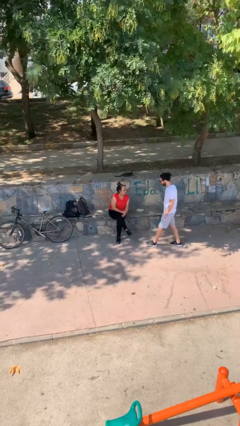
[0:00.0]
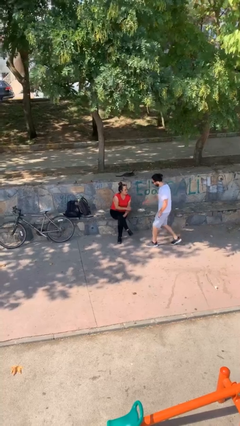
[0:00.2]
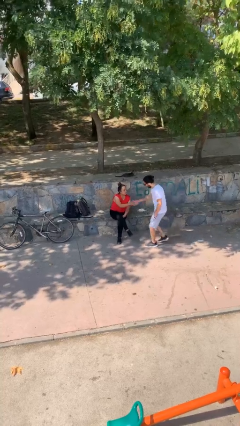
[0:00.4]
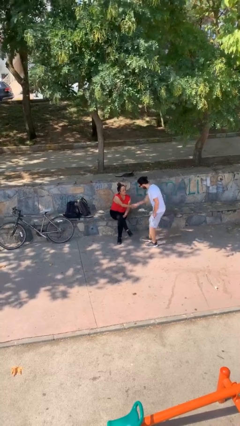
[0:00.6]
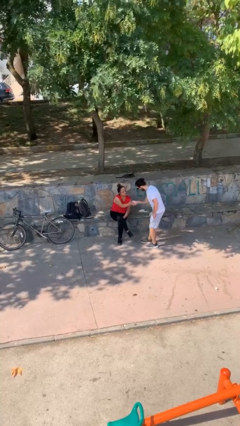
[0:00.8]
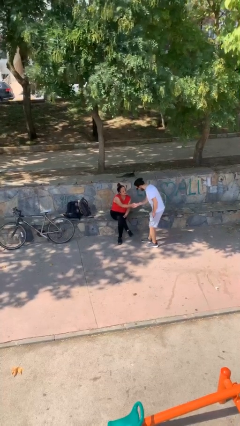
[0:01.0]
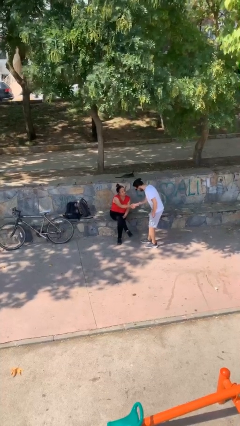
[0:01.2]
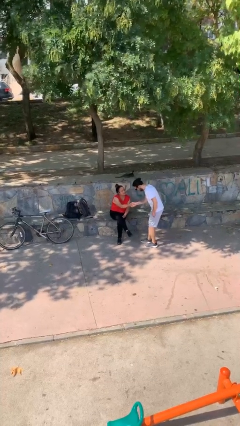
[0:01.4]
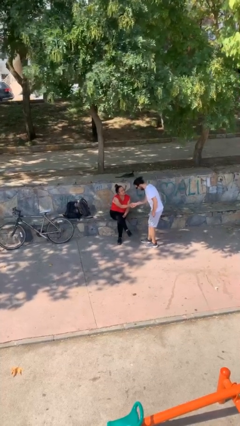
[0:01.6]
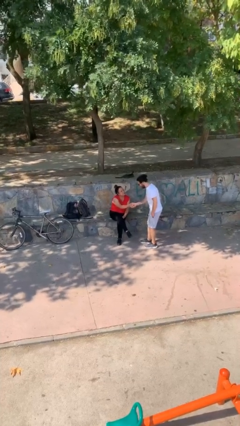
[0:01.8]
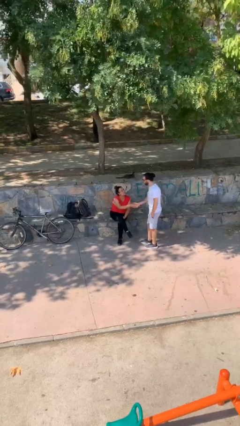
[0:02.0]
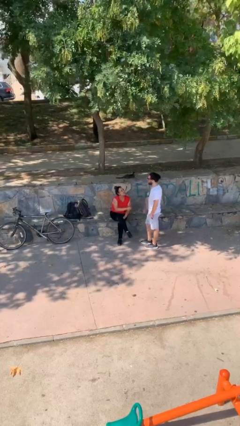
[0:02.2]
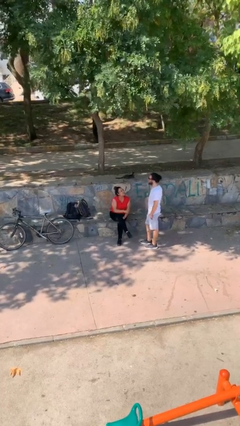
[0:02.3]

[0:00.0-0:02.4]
person shakes hand

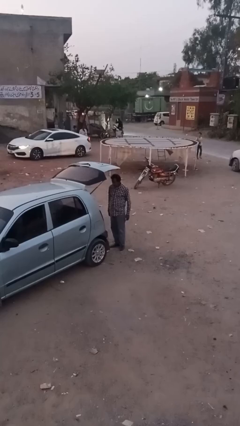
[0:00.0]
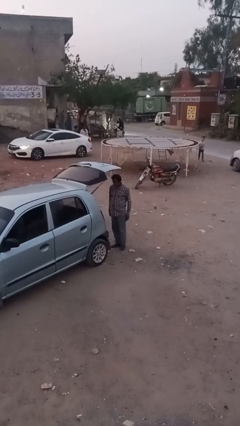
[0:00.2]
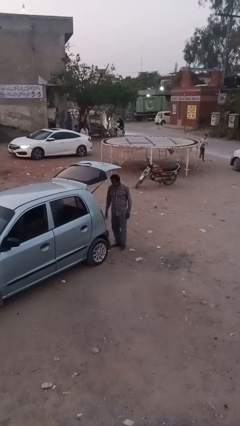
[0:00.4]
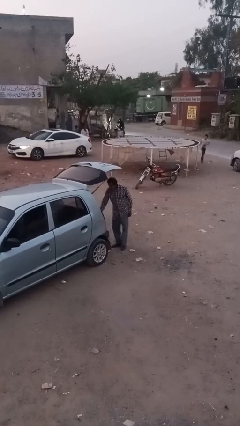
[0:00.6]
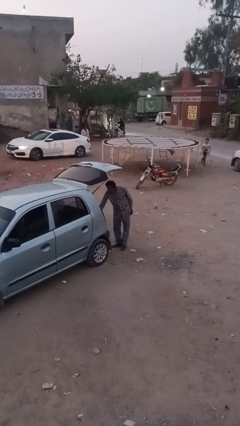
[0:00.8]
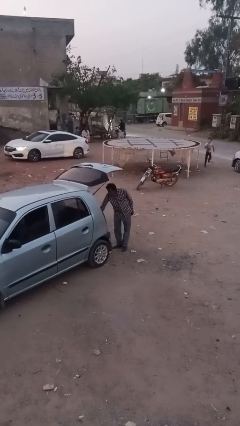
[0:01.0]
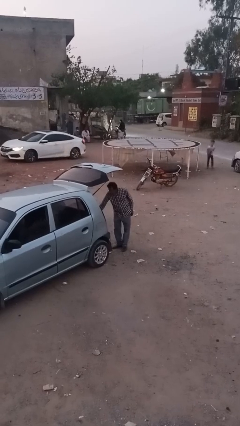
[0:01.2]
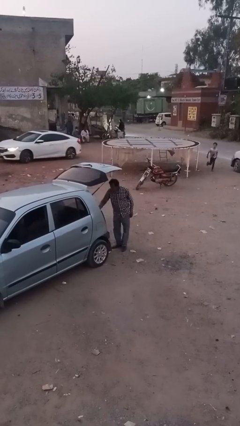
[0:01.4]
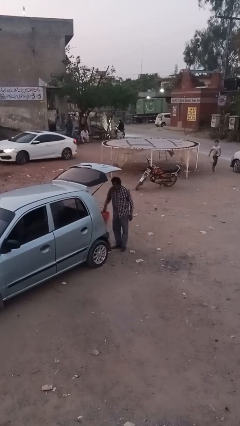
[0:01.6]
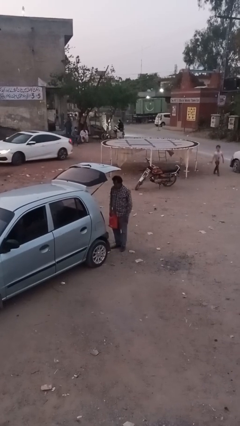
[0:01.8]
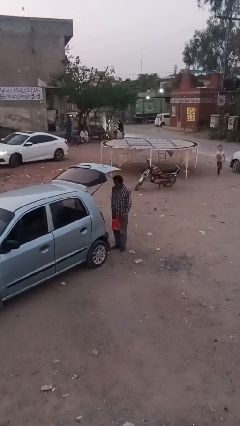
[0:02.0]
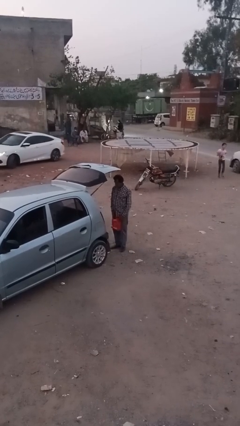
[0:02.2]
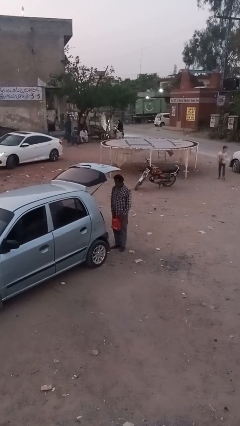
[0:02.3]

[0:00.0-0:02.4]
person unloads car

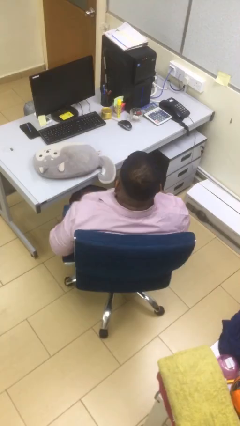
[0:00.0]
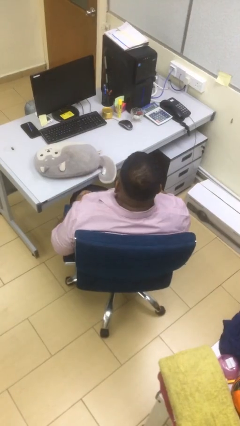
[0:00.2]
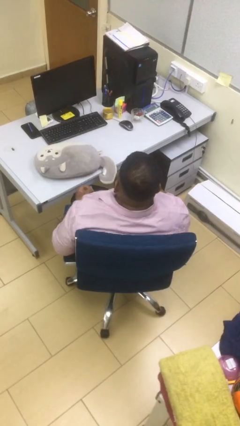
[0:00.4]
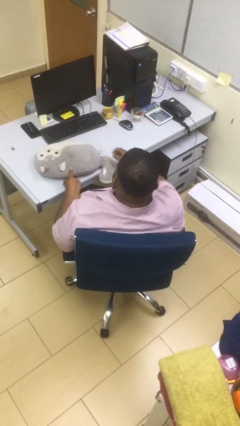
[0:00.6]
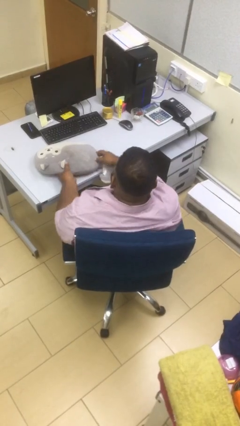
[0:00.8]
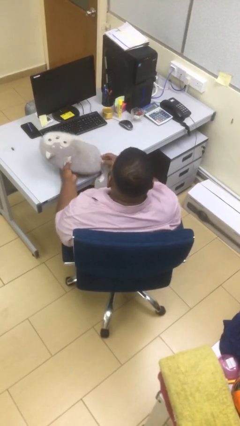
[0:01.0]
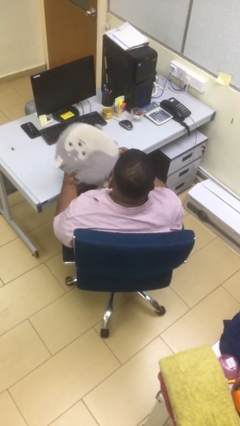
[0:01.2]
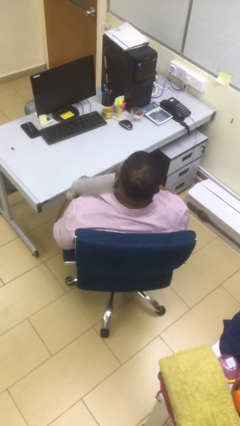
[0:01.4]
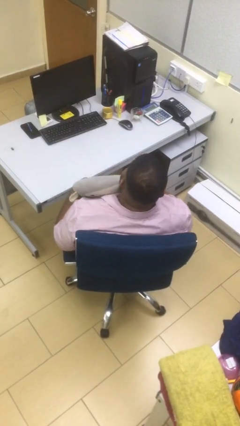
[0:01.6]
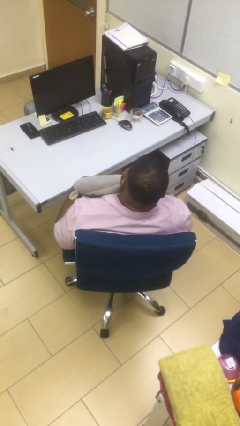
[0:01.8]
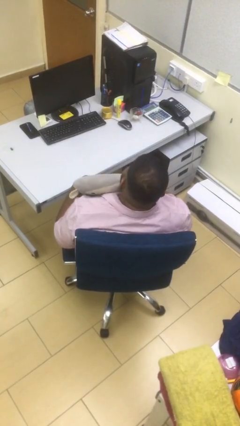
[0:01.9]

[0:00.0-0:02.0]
person hugs stuffed animal

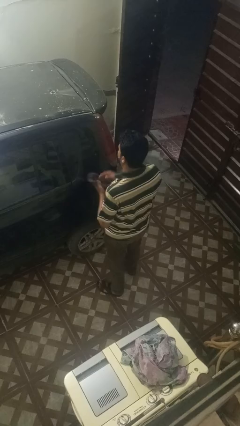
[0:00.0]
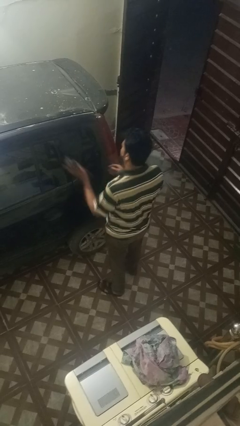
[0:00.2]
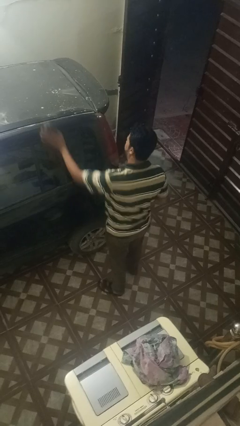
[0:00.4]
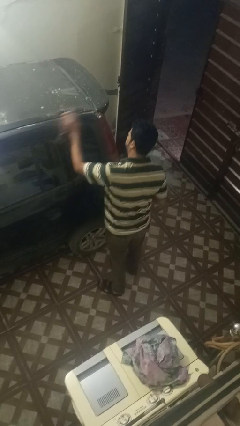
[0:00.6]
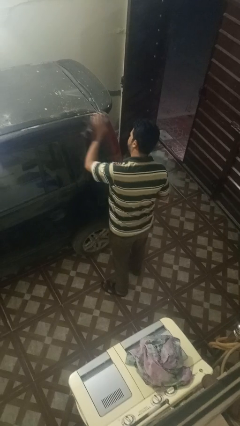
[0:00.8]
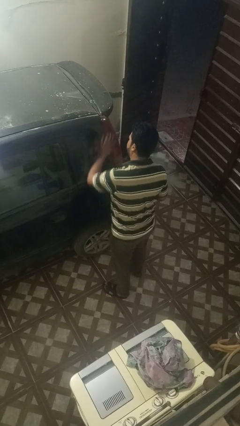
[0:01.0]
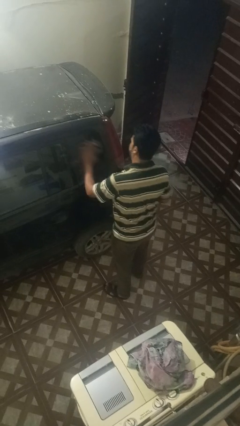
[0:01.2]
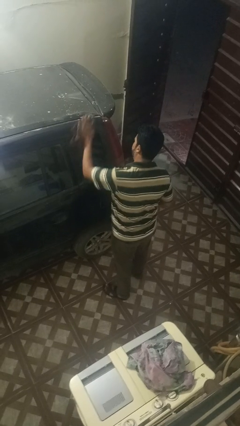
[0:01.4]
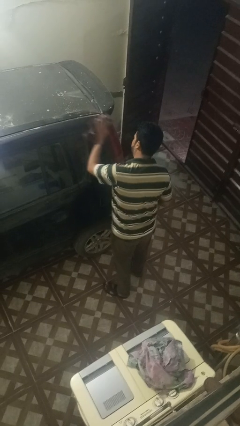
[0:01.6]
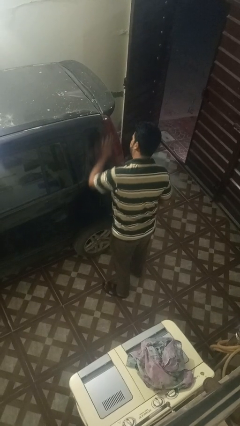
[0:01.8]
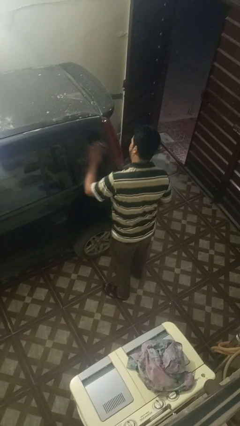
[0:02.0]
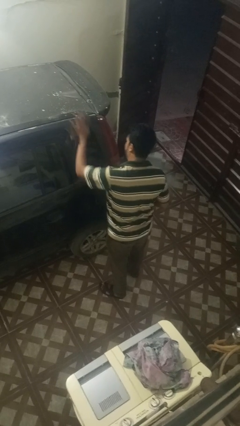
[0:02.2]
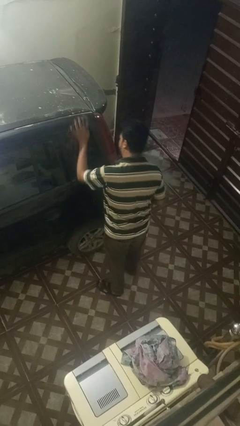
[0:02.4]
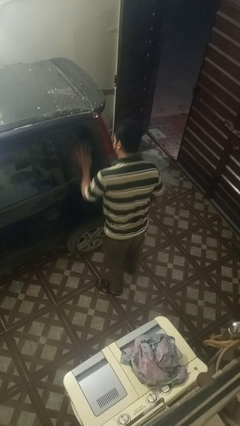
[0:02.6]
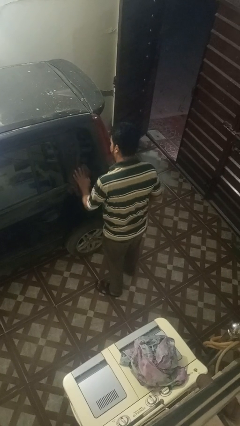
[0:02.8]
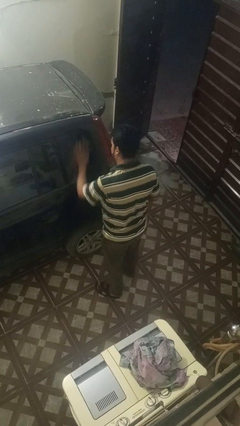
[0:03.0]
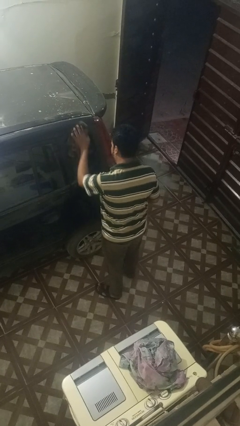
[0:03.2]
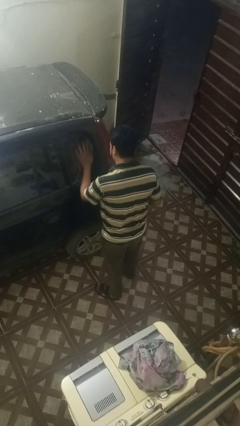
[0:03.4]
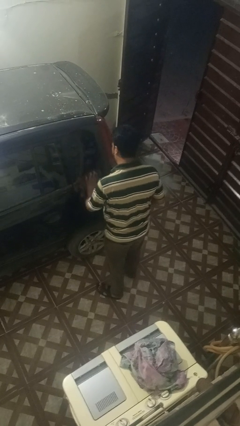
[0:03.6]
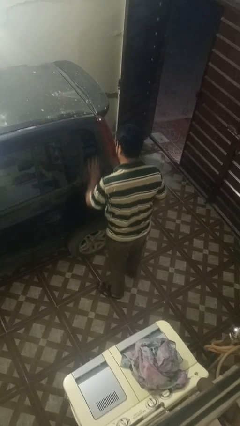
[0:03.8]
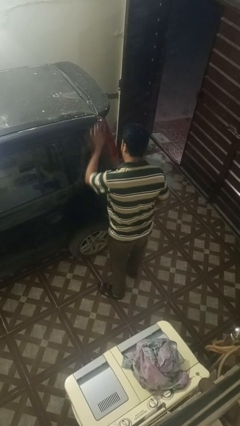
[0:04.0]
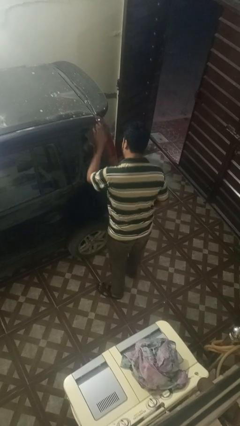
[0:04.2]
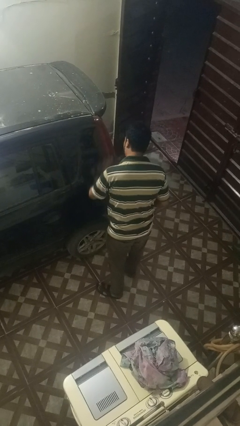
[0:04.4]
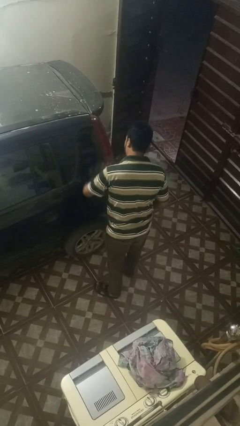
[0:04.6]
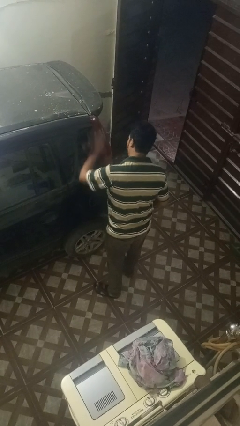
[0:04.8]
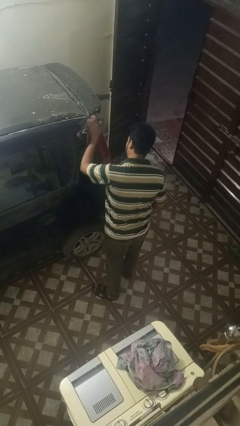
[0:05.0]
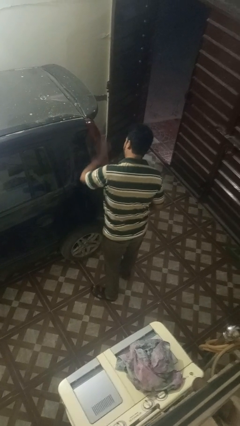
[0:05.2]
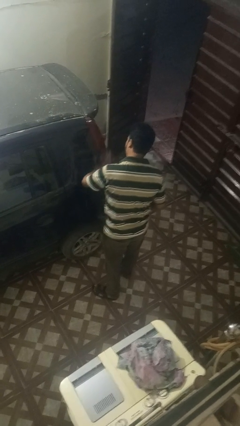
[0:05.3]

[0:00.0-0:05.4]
person polishes car with rag

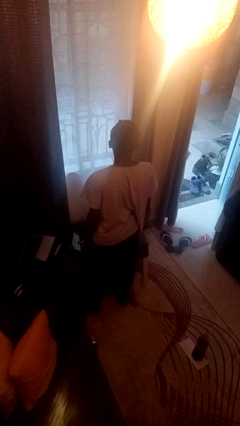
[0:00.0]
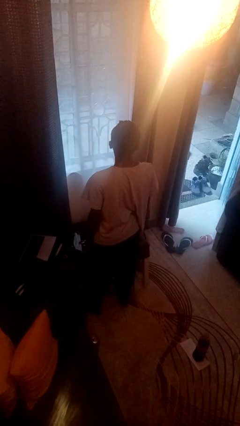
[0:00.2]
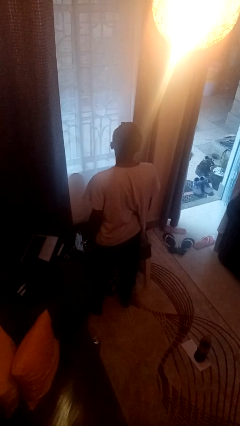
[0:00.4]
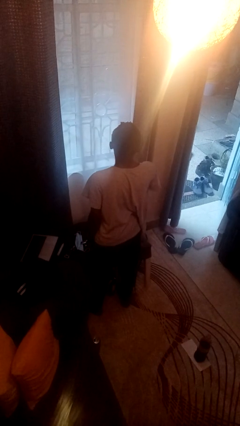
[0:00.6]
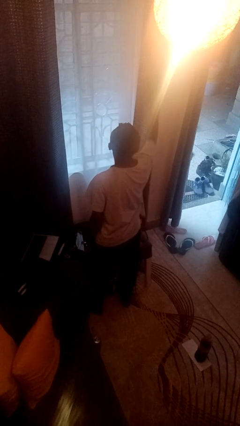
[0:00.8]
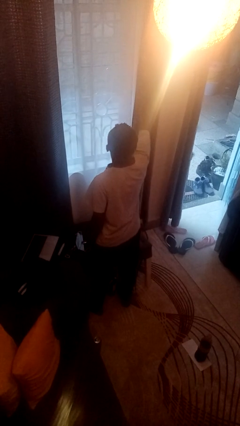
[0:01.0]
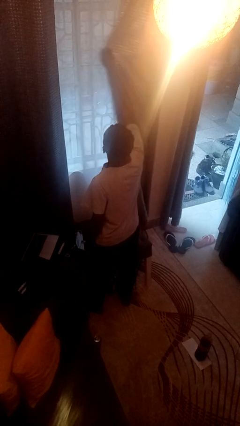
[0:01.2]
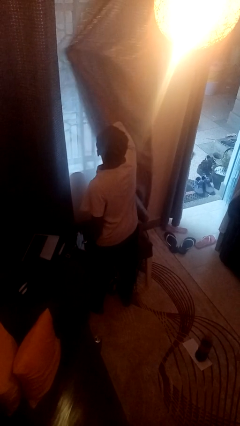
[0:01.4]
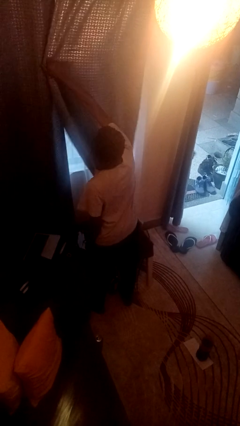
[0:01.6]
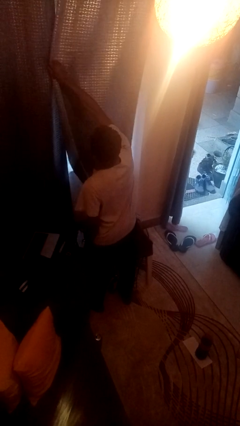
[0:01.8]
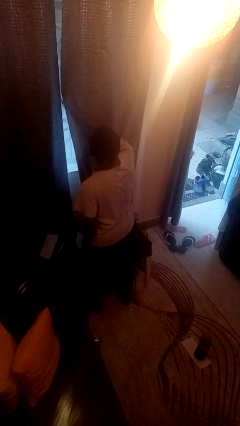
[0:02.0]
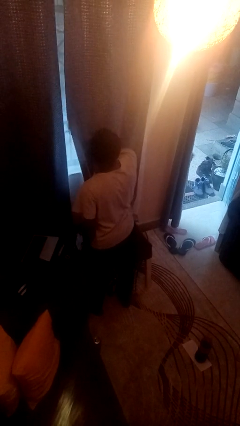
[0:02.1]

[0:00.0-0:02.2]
person closes curtains

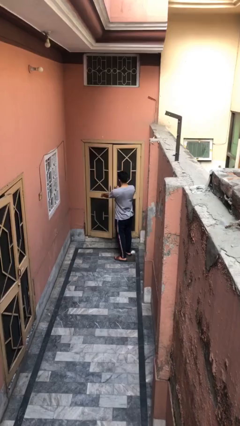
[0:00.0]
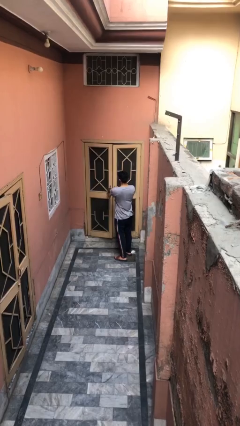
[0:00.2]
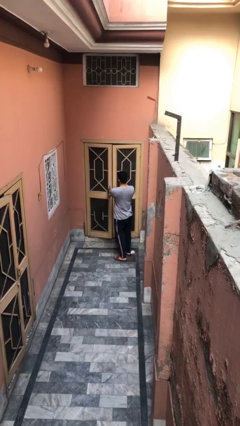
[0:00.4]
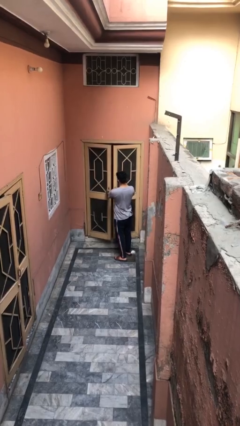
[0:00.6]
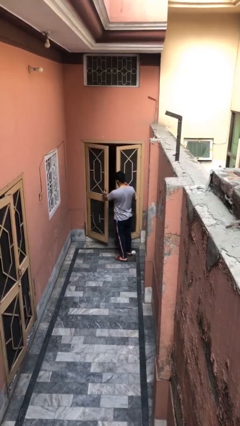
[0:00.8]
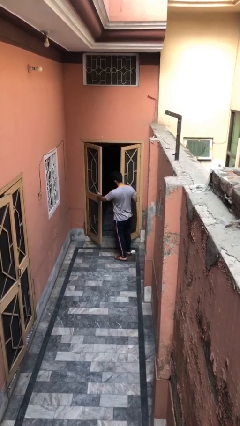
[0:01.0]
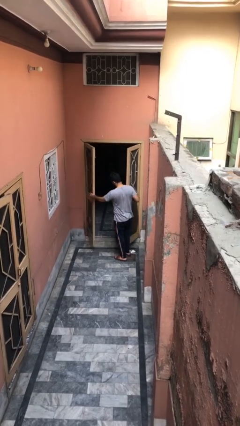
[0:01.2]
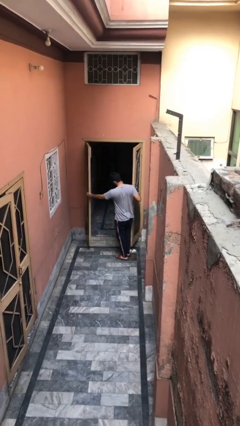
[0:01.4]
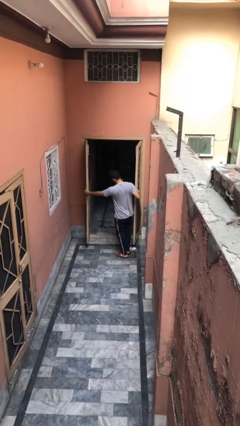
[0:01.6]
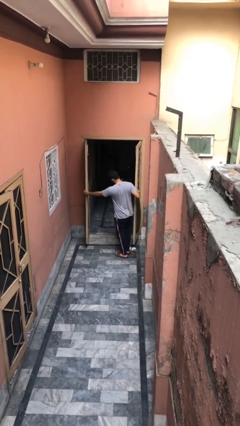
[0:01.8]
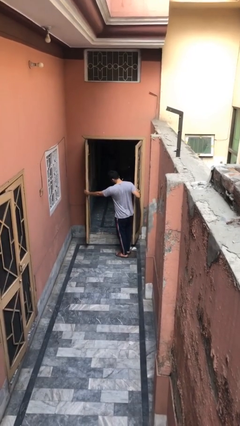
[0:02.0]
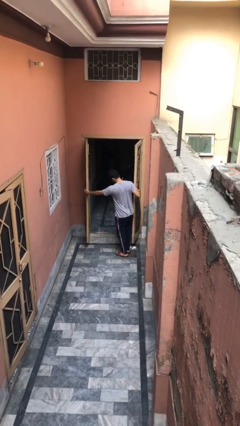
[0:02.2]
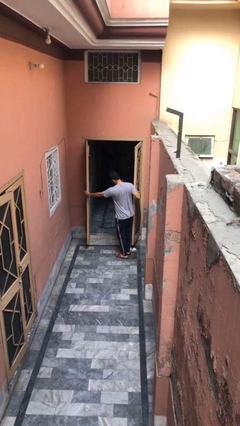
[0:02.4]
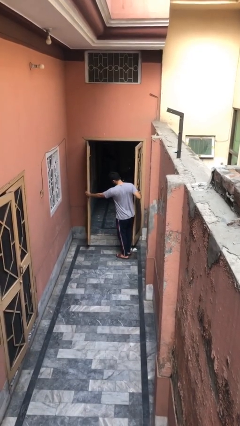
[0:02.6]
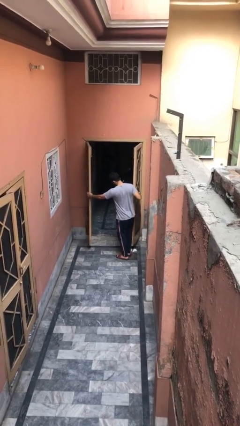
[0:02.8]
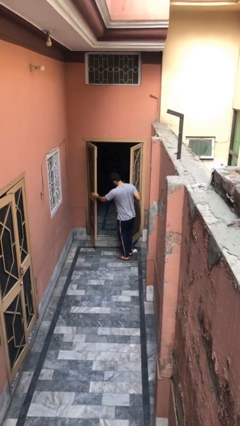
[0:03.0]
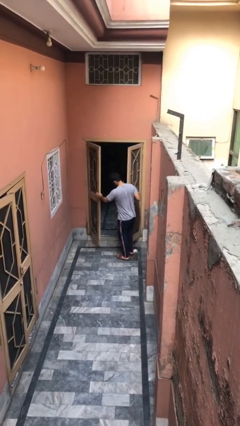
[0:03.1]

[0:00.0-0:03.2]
person opens gate
